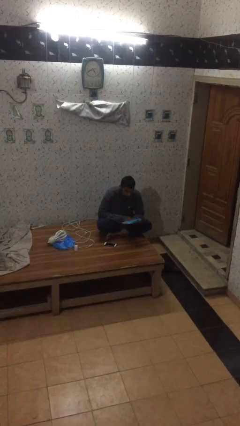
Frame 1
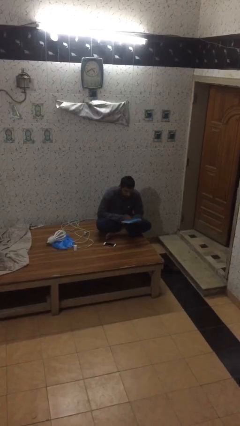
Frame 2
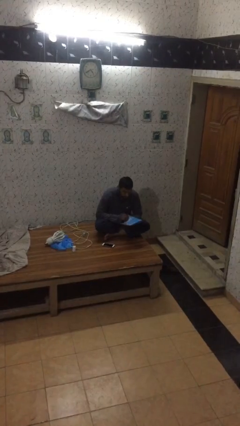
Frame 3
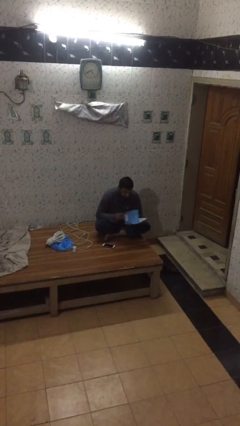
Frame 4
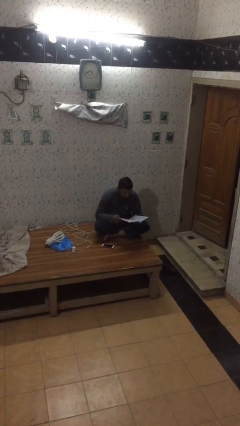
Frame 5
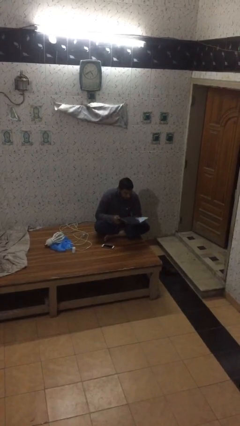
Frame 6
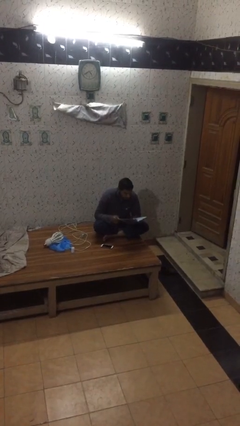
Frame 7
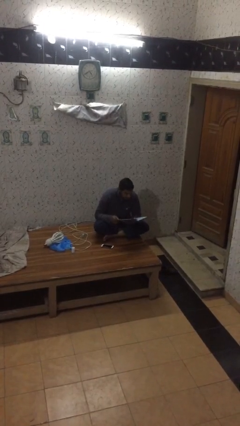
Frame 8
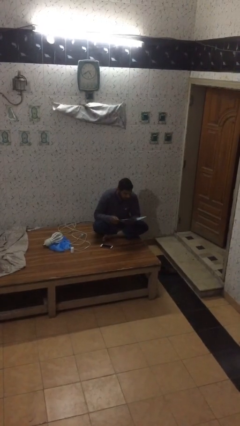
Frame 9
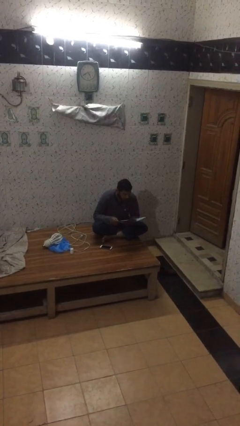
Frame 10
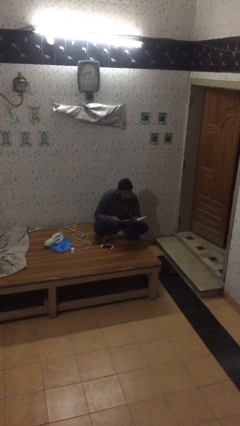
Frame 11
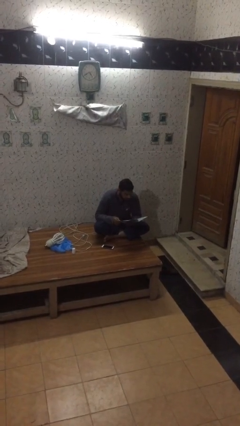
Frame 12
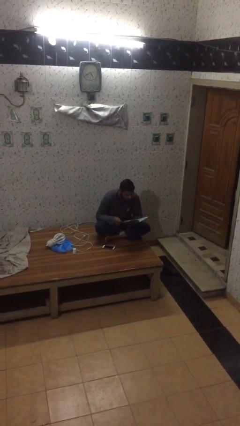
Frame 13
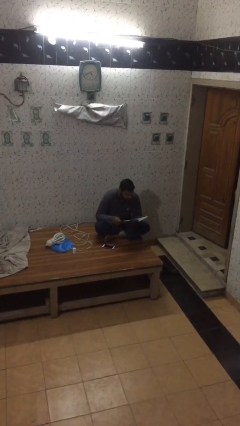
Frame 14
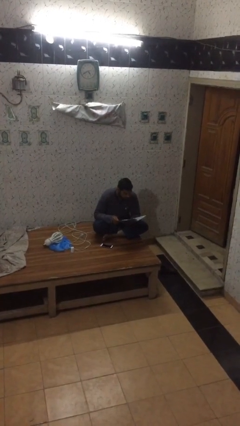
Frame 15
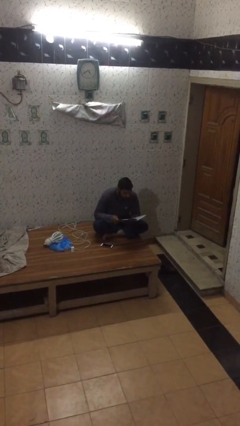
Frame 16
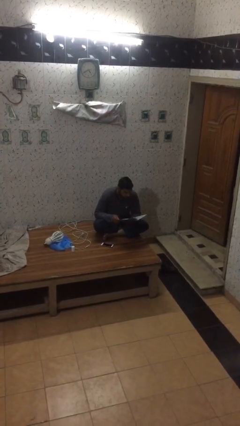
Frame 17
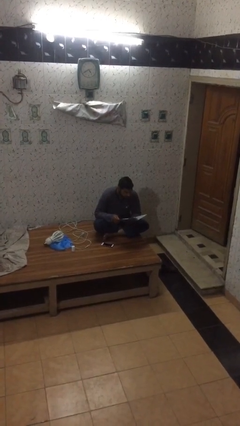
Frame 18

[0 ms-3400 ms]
person reads document

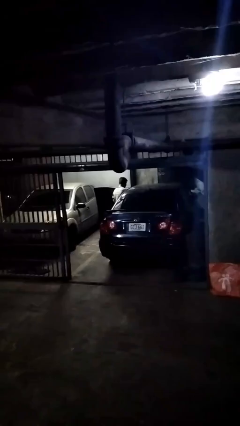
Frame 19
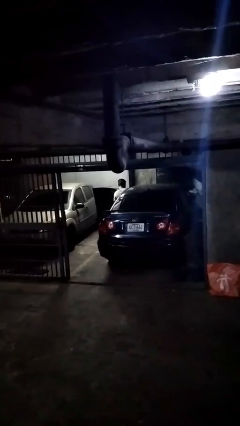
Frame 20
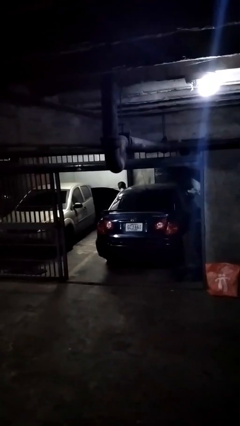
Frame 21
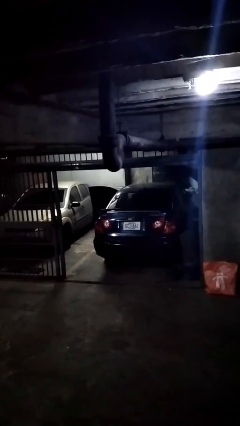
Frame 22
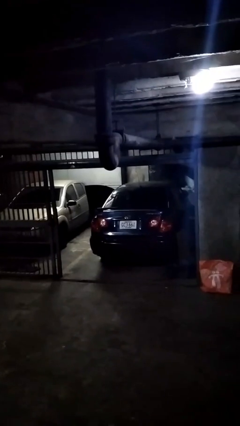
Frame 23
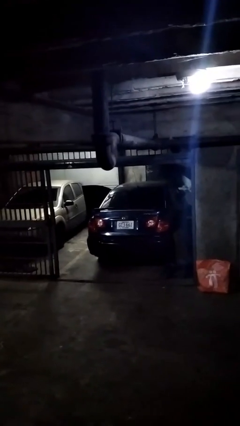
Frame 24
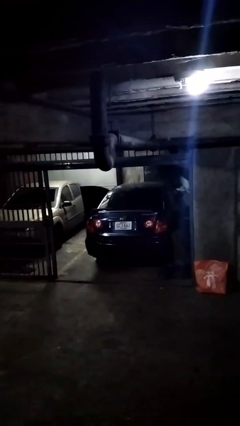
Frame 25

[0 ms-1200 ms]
person enters car

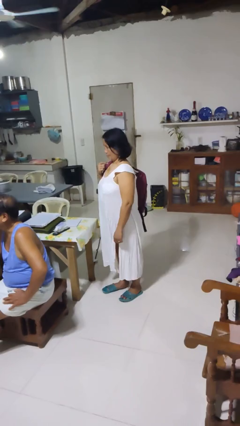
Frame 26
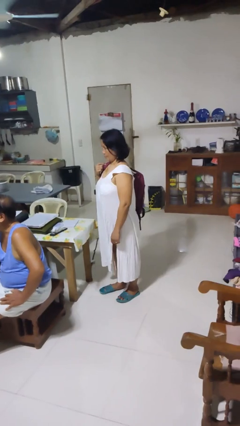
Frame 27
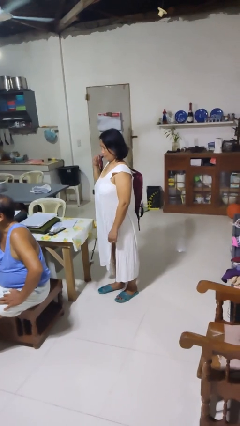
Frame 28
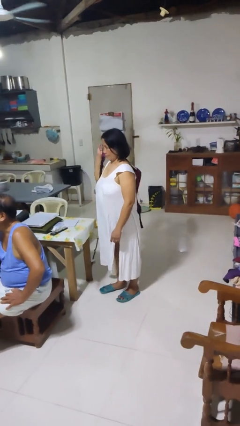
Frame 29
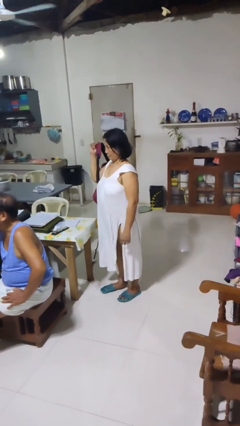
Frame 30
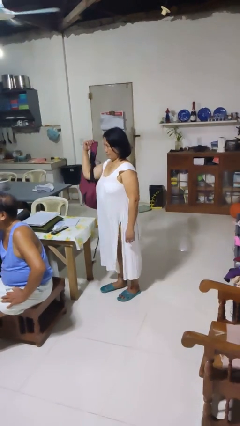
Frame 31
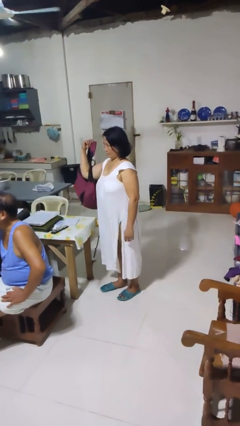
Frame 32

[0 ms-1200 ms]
person takes off backpack

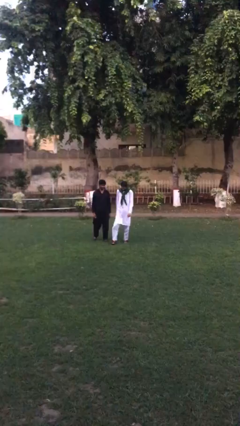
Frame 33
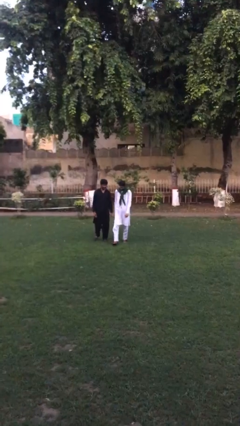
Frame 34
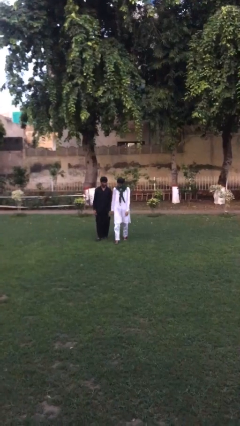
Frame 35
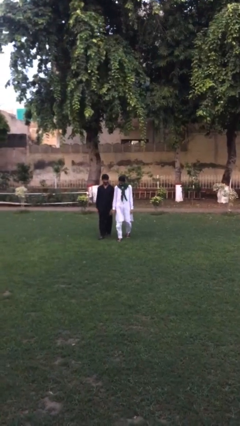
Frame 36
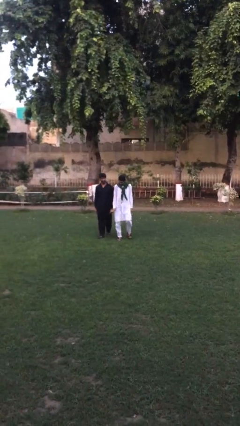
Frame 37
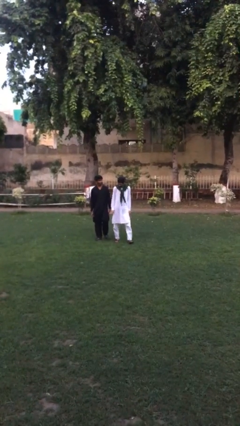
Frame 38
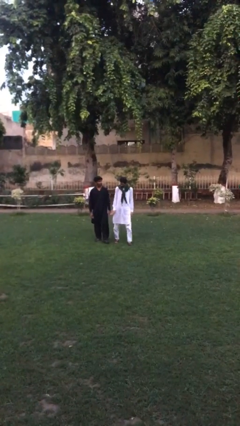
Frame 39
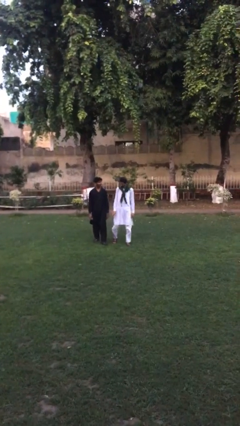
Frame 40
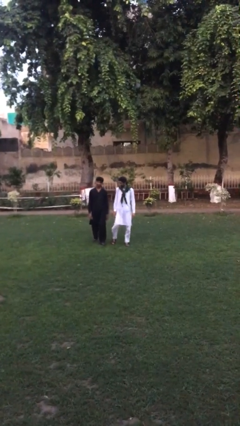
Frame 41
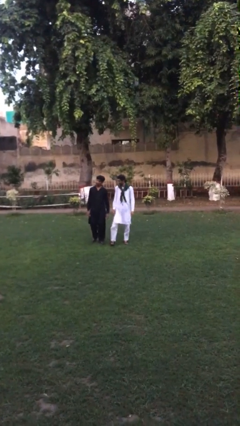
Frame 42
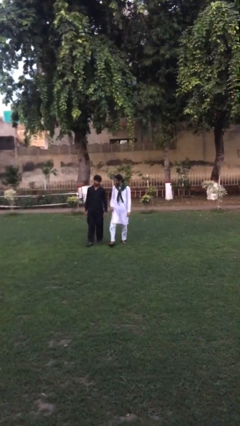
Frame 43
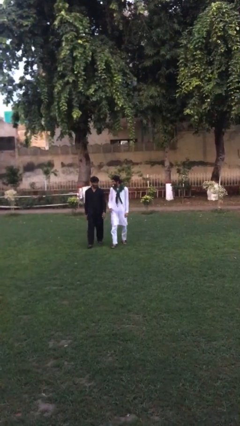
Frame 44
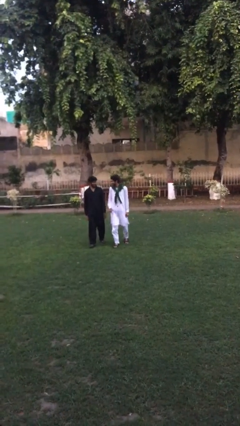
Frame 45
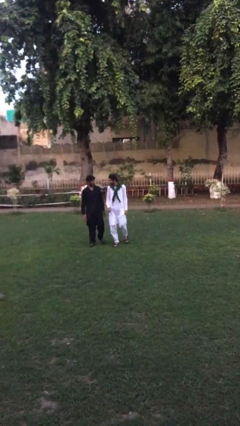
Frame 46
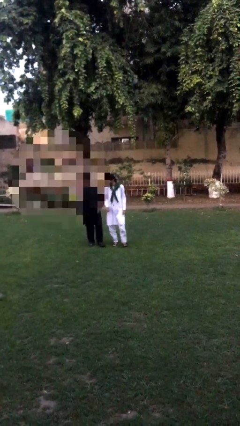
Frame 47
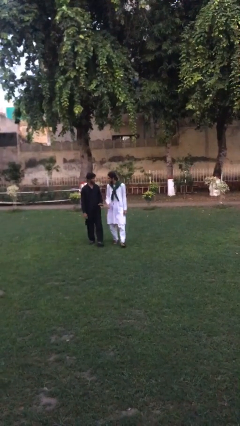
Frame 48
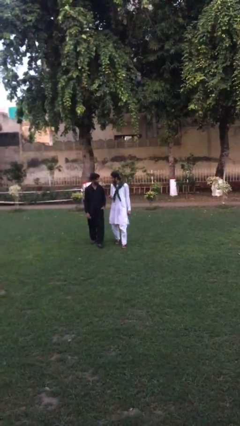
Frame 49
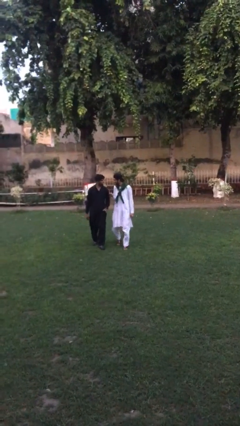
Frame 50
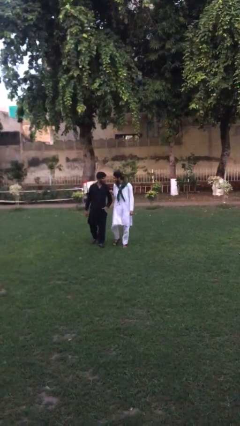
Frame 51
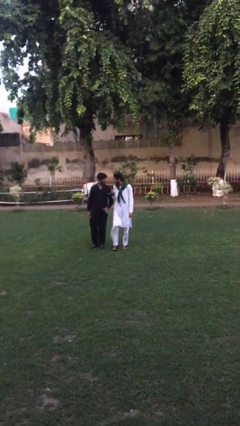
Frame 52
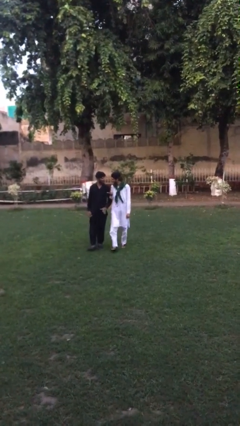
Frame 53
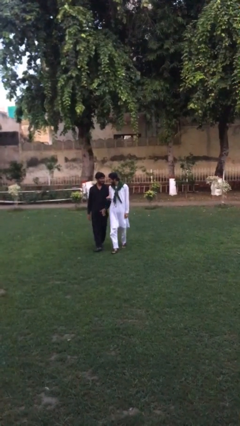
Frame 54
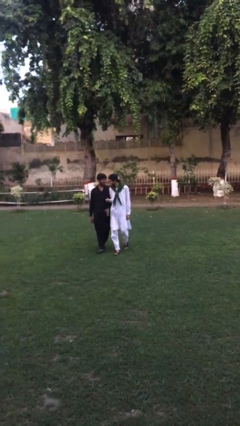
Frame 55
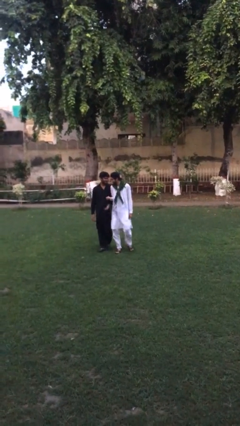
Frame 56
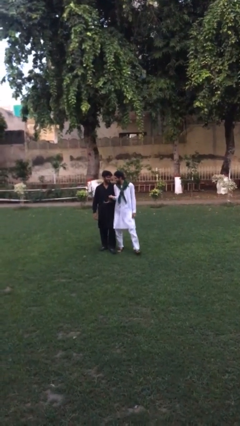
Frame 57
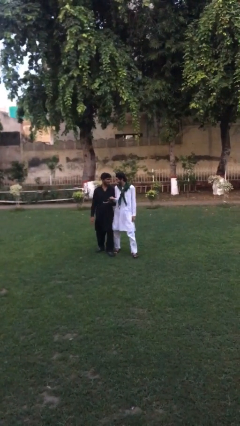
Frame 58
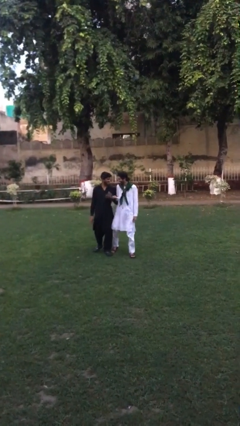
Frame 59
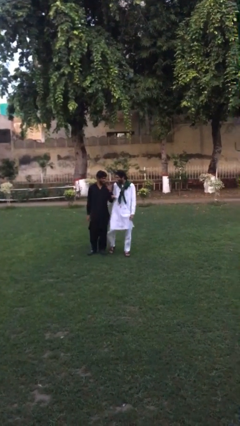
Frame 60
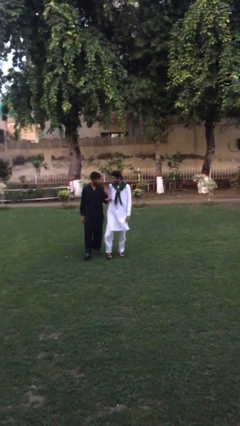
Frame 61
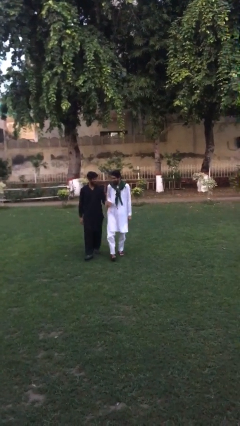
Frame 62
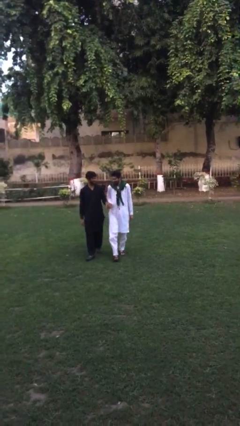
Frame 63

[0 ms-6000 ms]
person talks to person

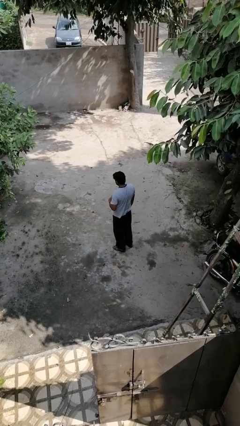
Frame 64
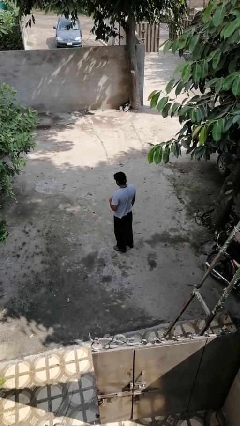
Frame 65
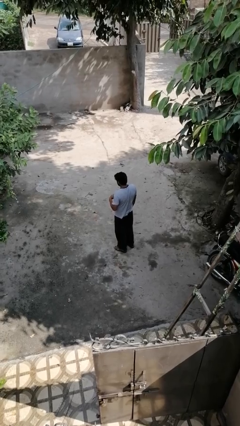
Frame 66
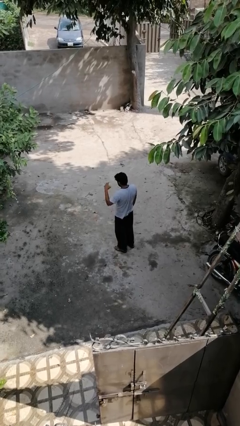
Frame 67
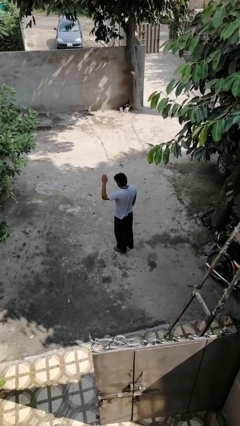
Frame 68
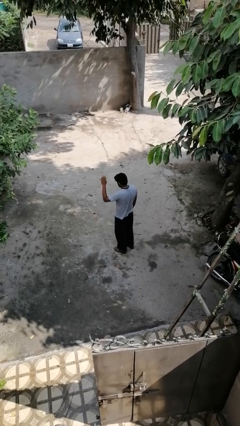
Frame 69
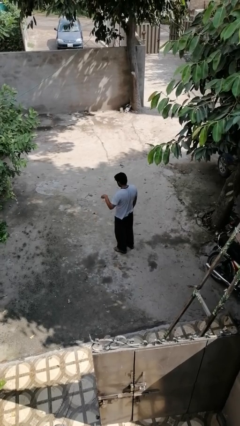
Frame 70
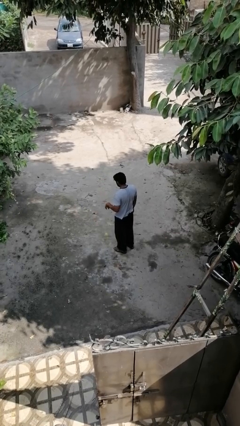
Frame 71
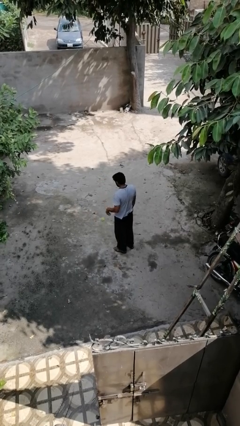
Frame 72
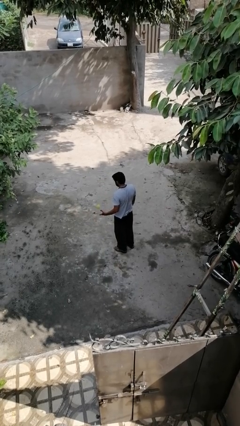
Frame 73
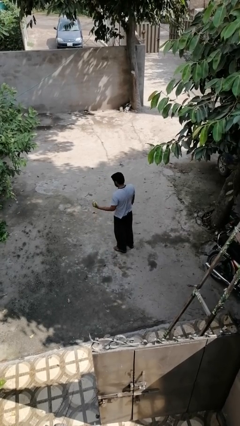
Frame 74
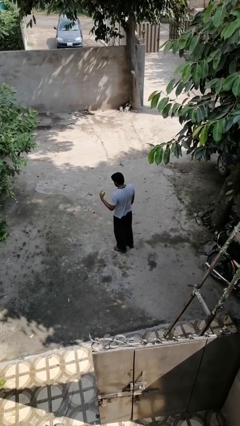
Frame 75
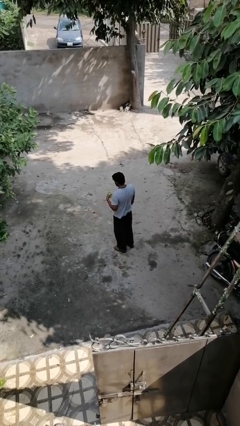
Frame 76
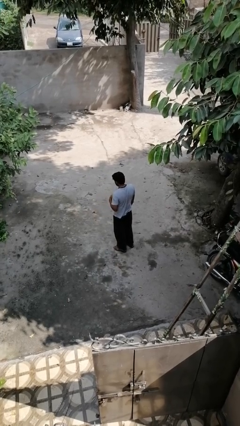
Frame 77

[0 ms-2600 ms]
person bounces ball on floor

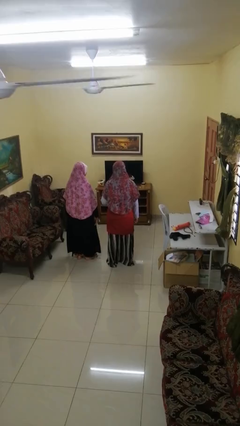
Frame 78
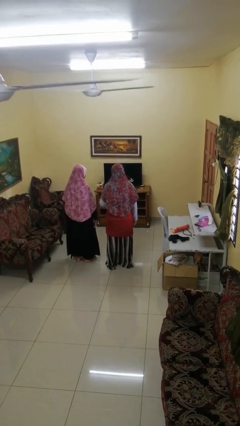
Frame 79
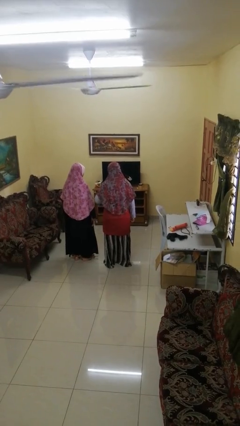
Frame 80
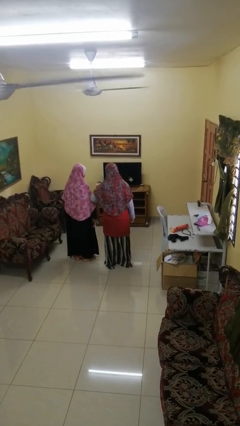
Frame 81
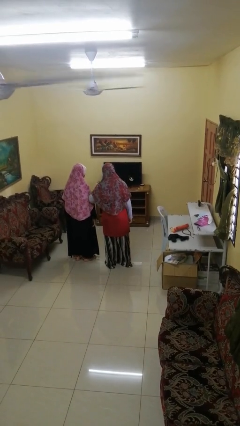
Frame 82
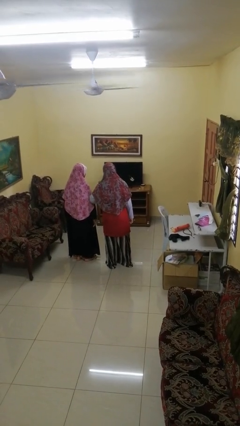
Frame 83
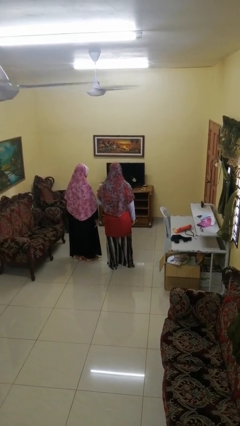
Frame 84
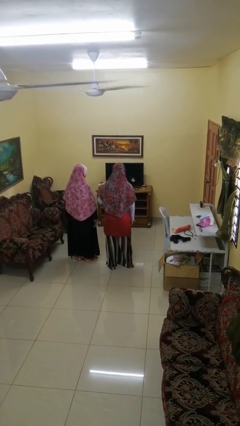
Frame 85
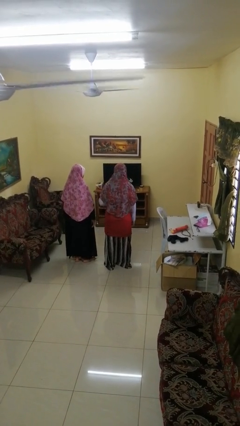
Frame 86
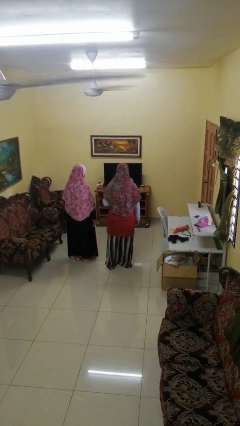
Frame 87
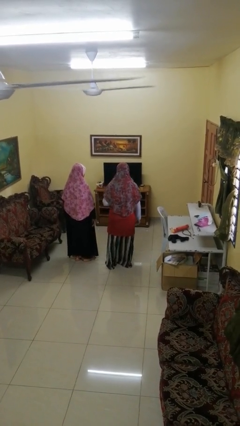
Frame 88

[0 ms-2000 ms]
person nudges person with elbow

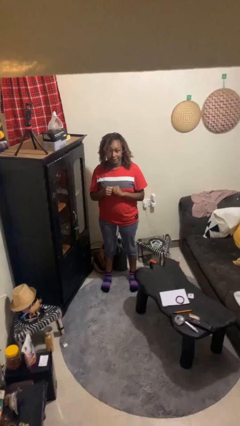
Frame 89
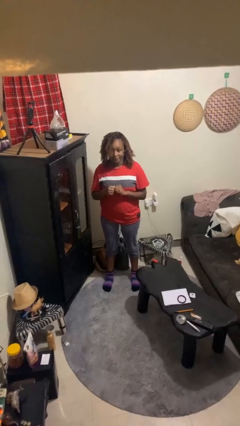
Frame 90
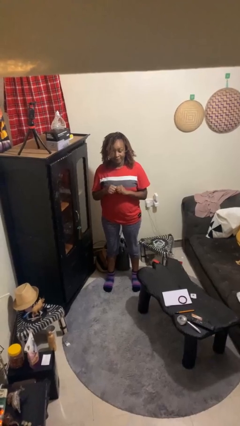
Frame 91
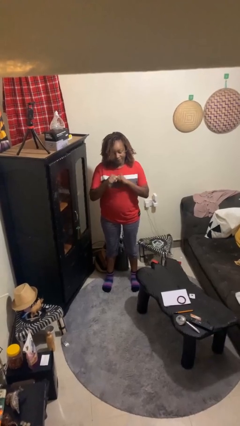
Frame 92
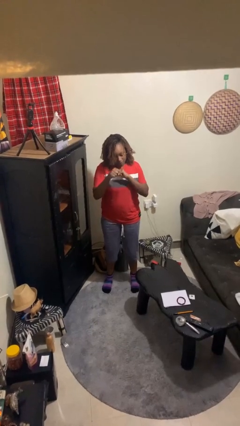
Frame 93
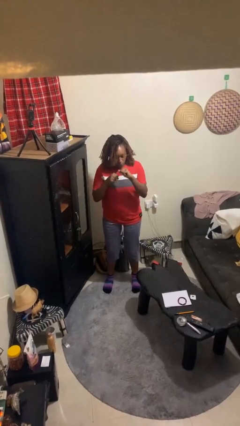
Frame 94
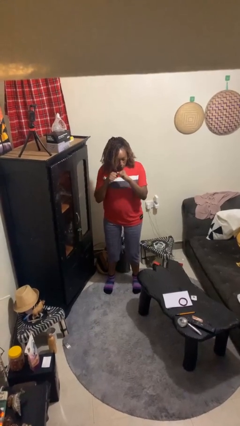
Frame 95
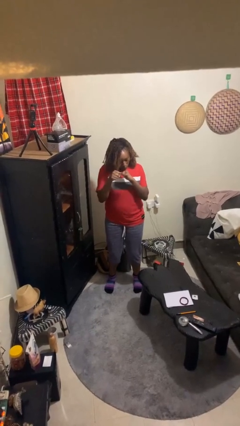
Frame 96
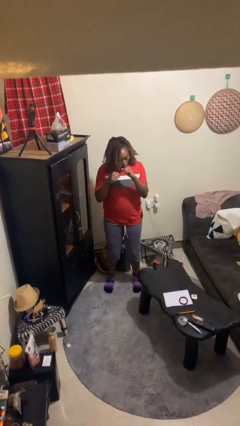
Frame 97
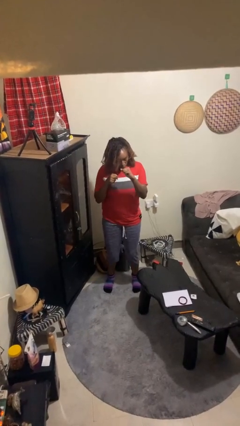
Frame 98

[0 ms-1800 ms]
person punches
